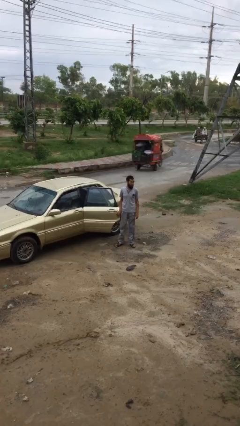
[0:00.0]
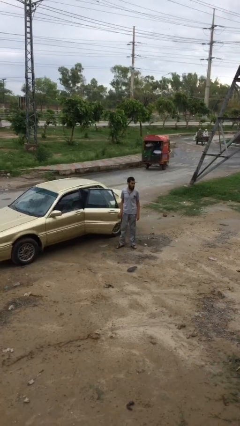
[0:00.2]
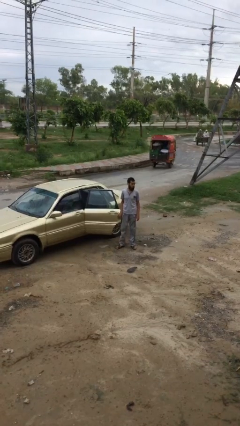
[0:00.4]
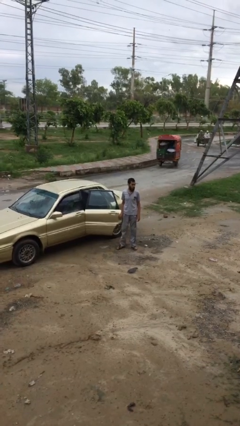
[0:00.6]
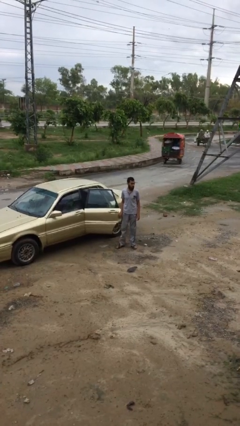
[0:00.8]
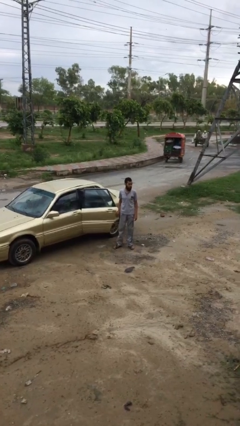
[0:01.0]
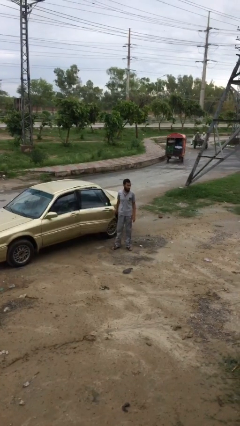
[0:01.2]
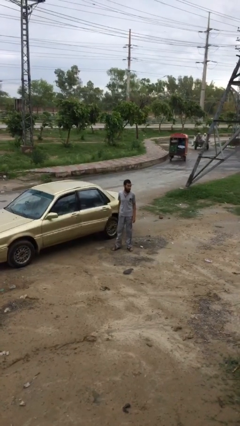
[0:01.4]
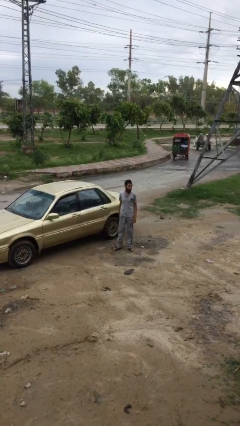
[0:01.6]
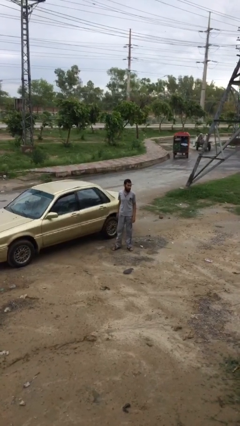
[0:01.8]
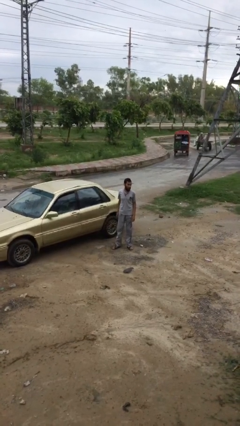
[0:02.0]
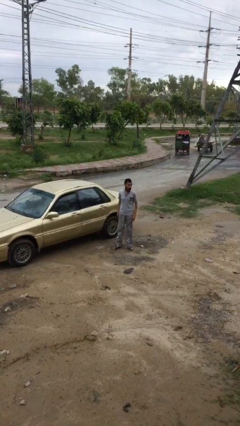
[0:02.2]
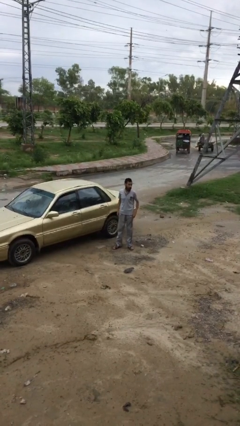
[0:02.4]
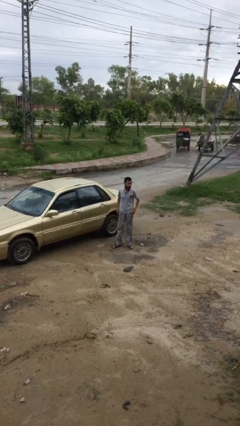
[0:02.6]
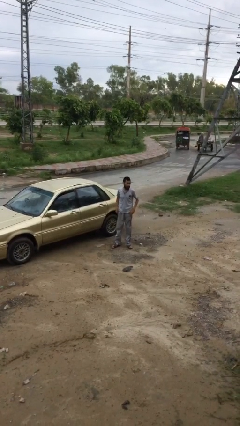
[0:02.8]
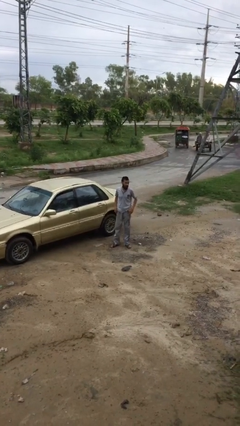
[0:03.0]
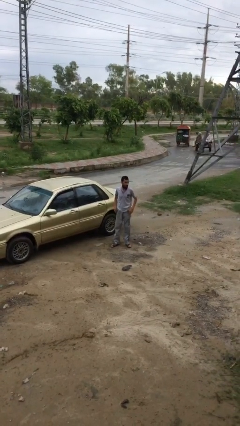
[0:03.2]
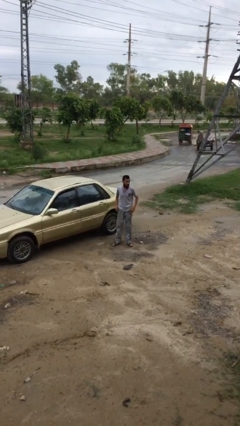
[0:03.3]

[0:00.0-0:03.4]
person closes car door

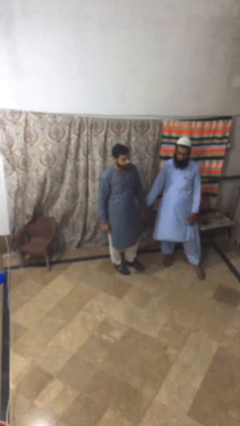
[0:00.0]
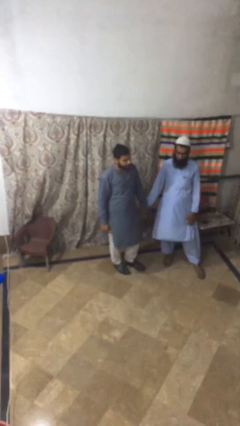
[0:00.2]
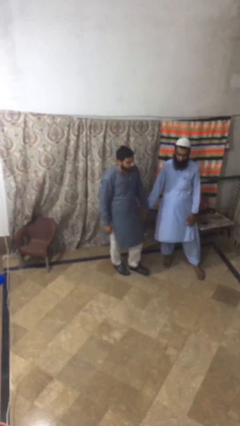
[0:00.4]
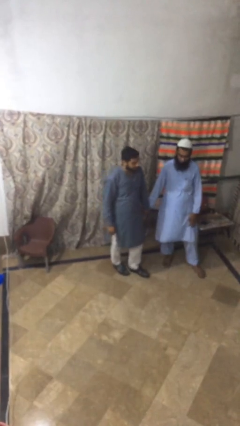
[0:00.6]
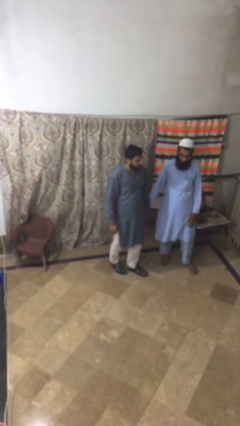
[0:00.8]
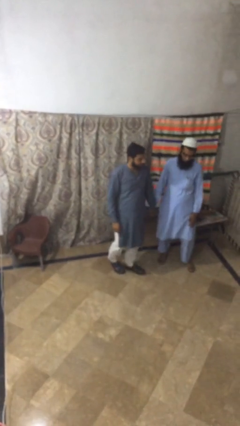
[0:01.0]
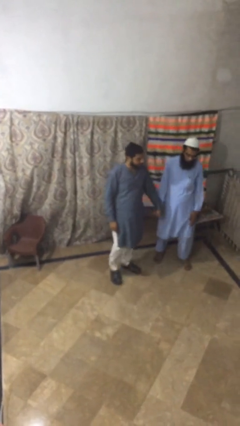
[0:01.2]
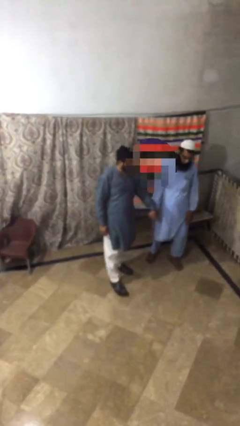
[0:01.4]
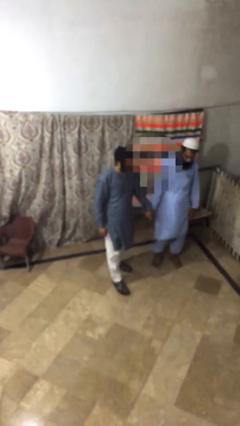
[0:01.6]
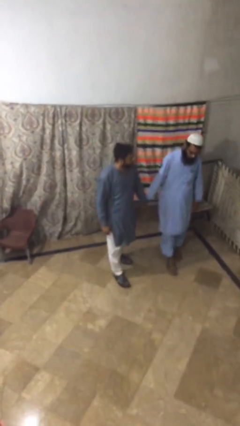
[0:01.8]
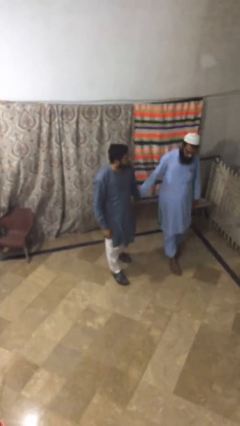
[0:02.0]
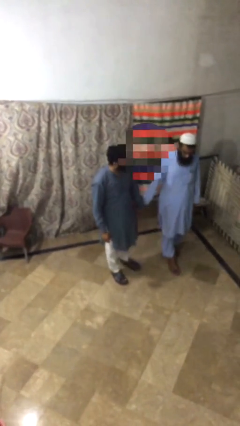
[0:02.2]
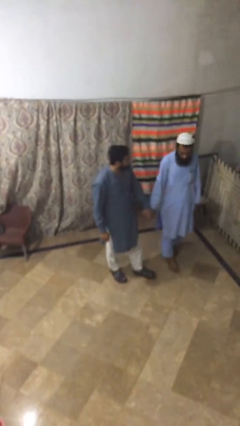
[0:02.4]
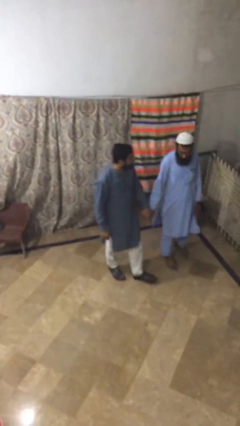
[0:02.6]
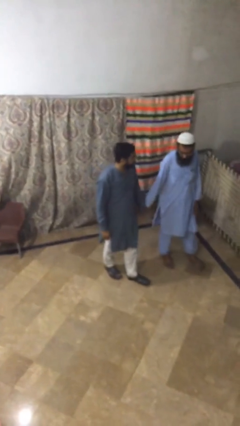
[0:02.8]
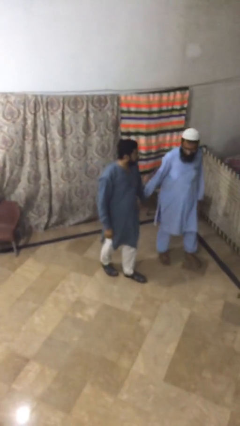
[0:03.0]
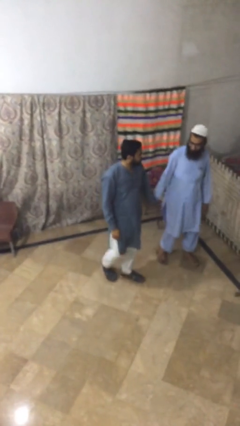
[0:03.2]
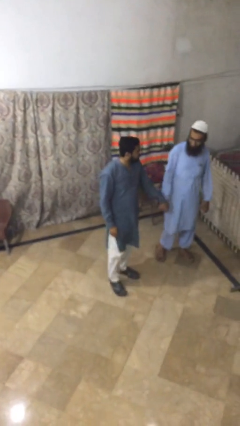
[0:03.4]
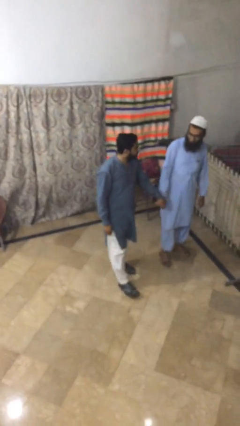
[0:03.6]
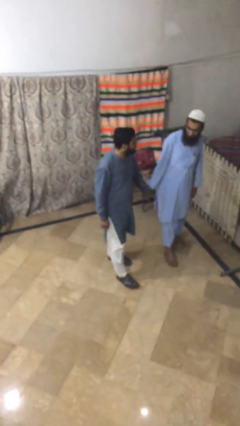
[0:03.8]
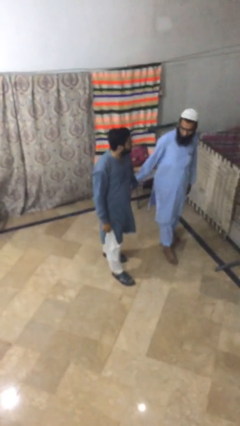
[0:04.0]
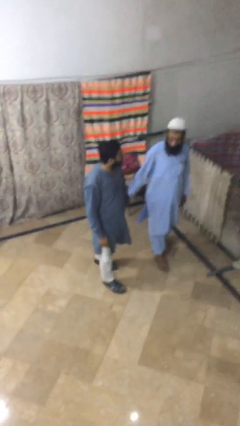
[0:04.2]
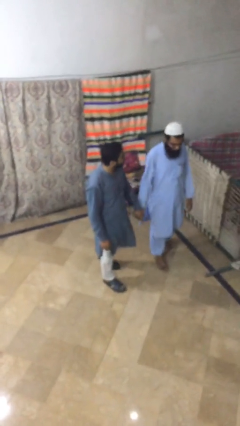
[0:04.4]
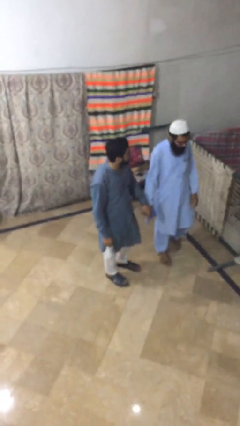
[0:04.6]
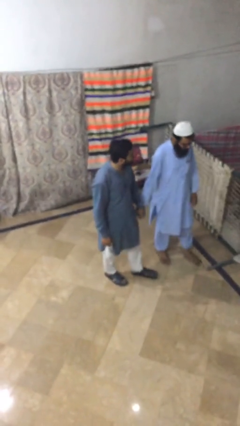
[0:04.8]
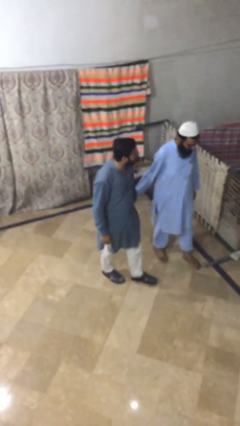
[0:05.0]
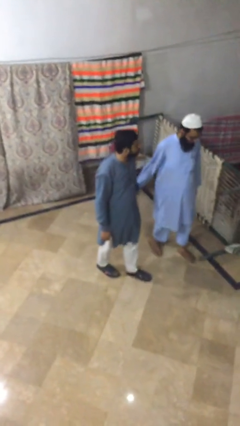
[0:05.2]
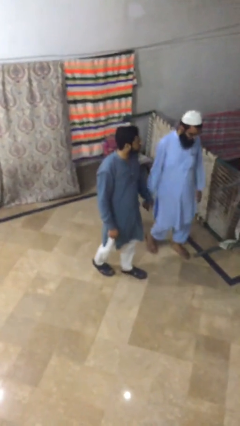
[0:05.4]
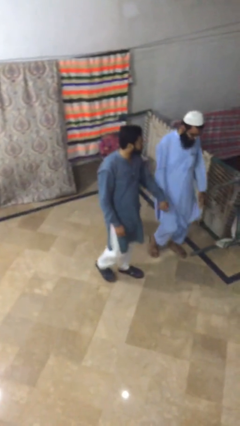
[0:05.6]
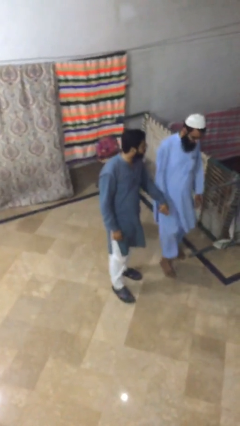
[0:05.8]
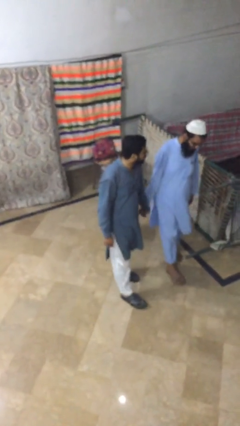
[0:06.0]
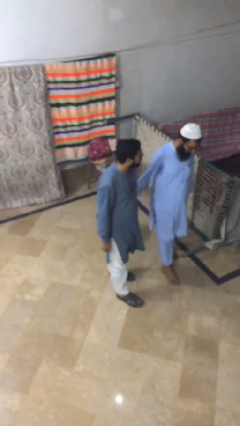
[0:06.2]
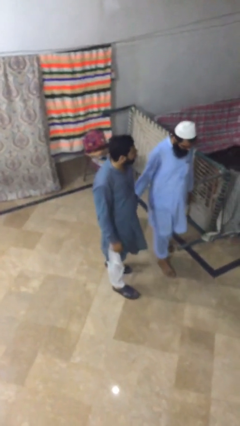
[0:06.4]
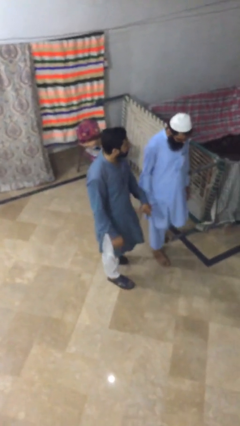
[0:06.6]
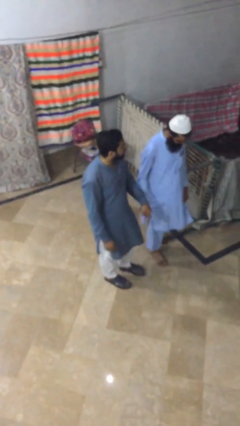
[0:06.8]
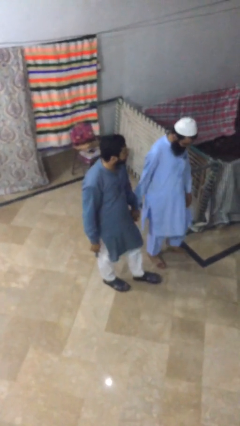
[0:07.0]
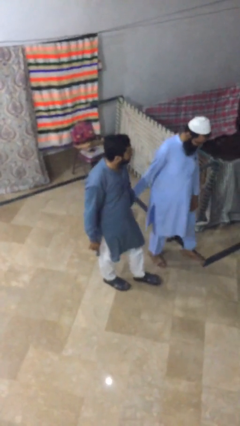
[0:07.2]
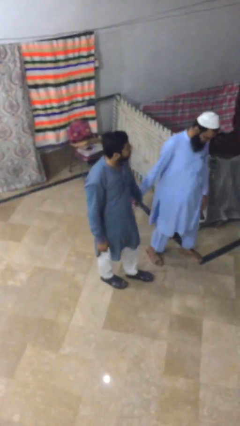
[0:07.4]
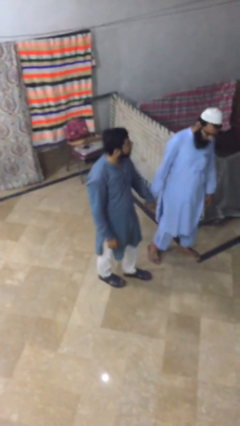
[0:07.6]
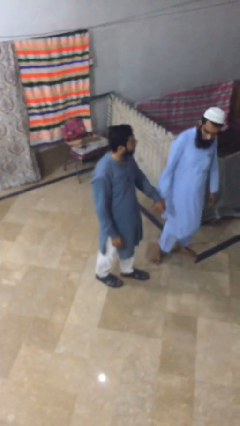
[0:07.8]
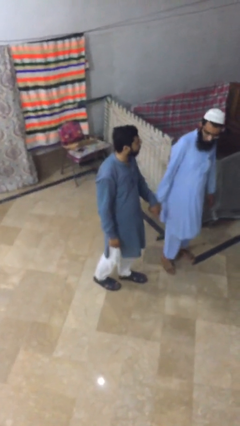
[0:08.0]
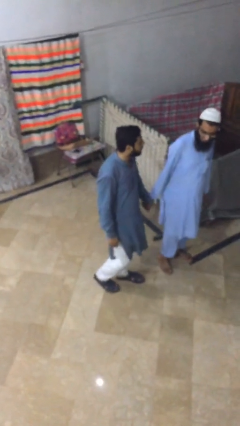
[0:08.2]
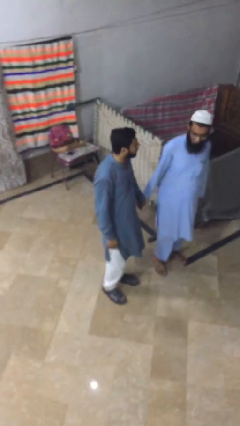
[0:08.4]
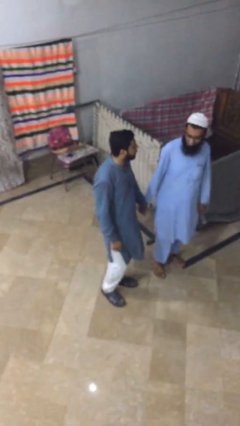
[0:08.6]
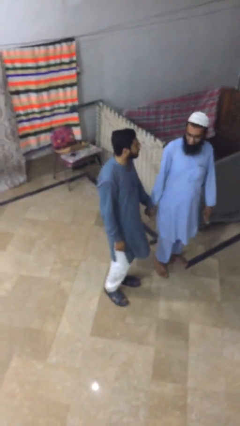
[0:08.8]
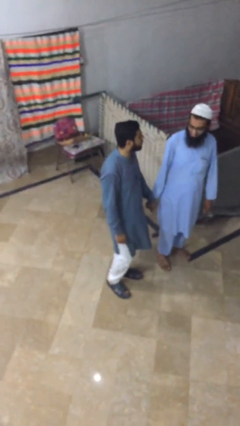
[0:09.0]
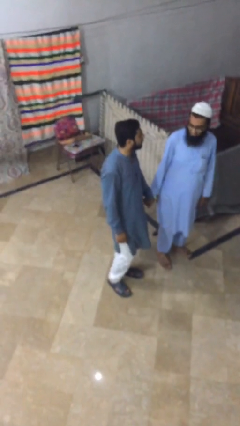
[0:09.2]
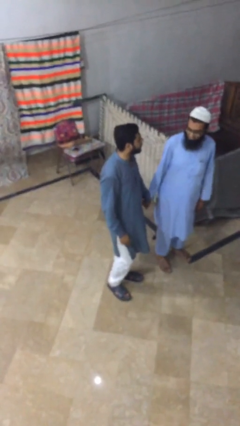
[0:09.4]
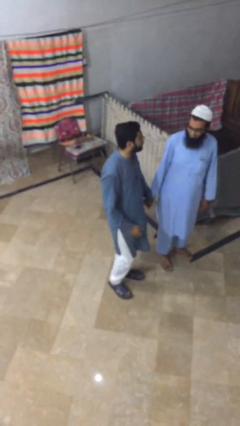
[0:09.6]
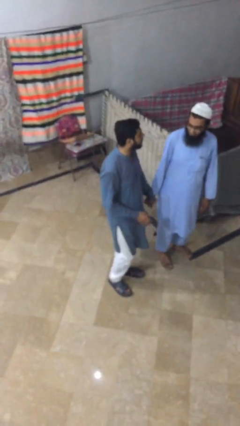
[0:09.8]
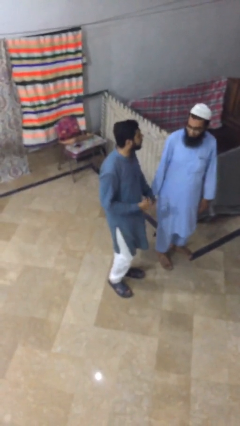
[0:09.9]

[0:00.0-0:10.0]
person holds hand

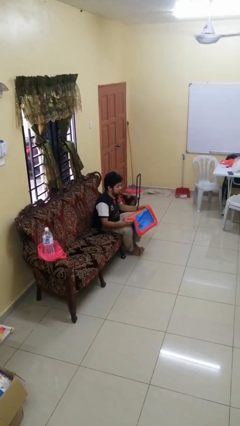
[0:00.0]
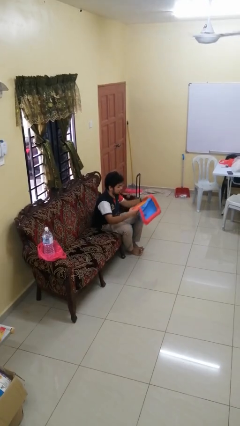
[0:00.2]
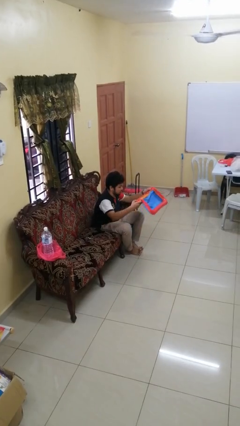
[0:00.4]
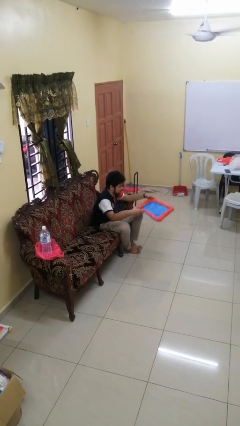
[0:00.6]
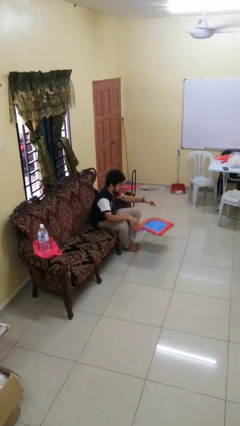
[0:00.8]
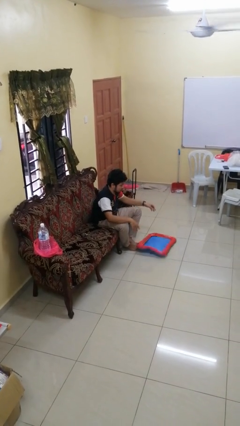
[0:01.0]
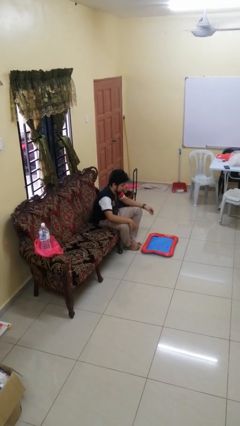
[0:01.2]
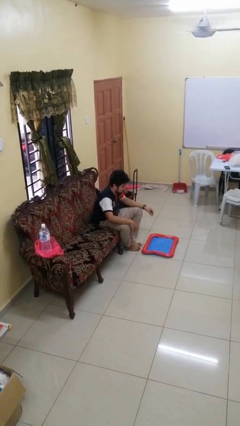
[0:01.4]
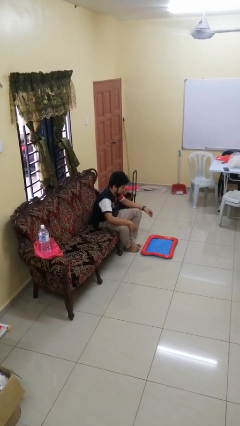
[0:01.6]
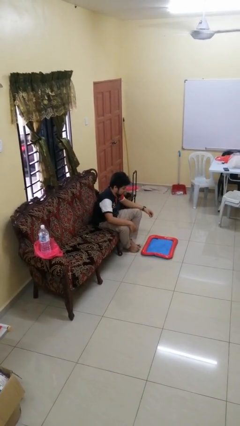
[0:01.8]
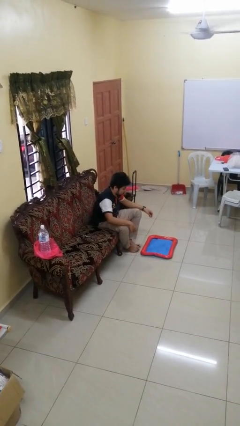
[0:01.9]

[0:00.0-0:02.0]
person drops object

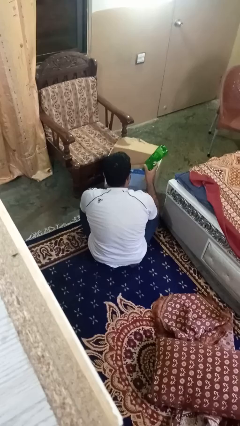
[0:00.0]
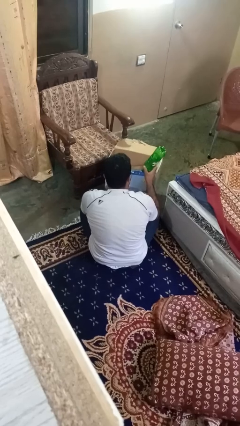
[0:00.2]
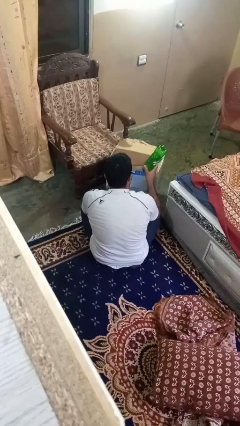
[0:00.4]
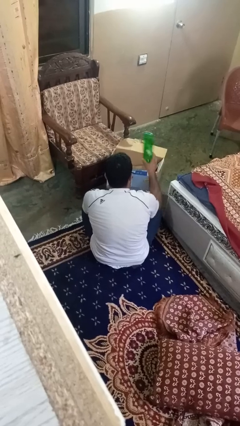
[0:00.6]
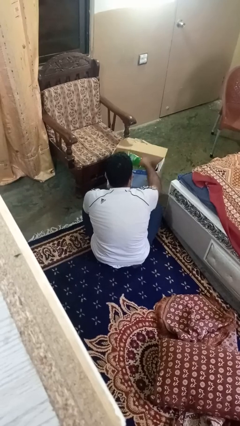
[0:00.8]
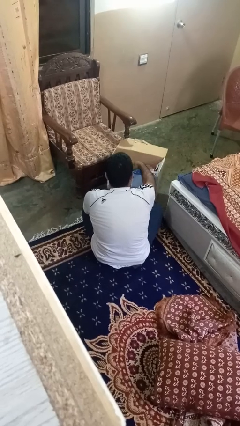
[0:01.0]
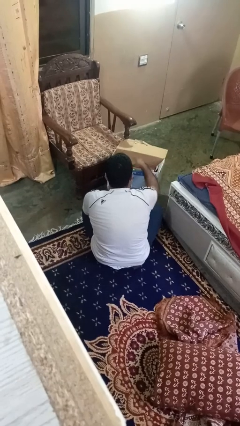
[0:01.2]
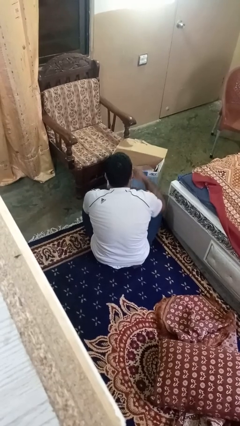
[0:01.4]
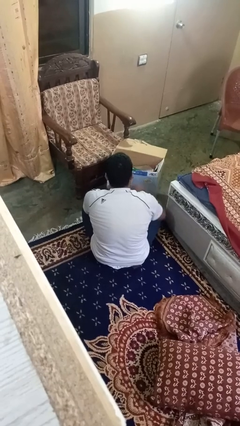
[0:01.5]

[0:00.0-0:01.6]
person puts object into box

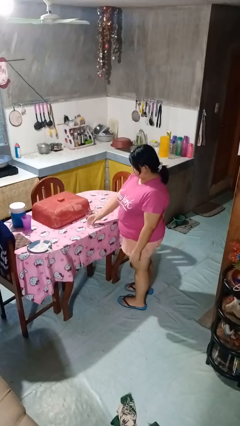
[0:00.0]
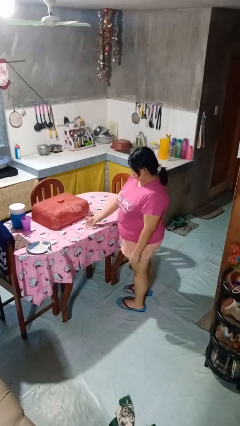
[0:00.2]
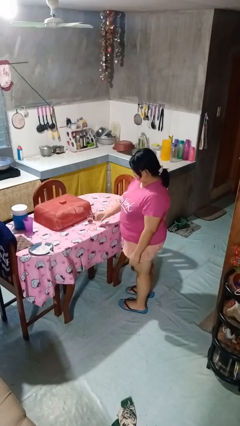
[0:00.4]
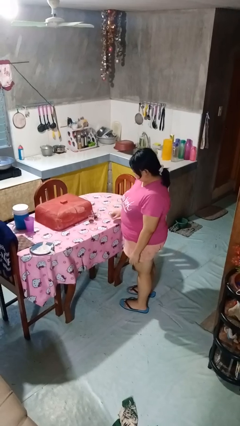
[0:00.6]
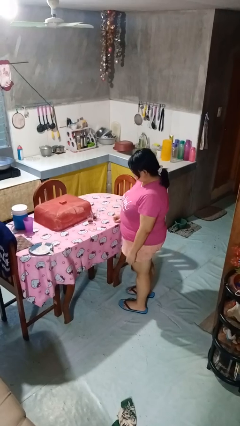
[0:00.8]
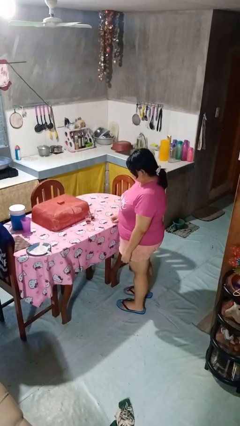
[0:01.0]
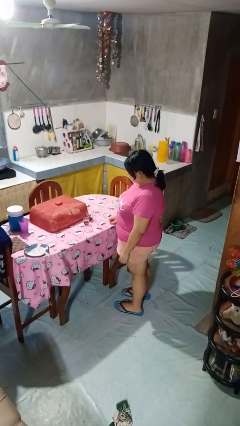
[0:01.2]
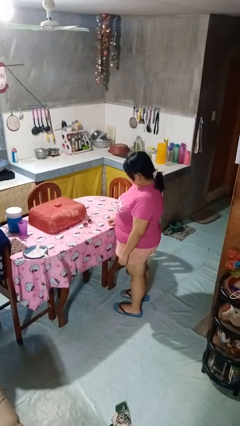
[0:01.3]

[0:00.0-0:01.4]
person puts down object on table
